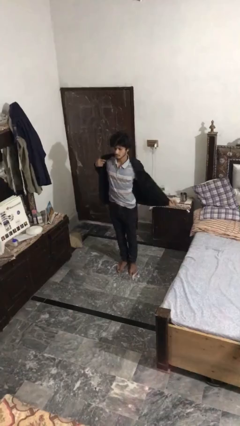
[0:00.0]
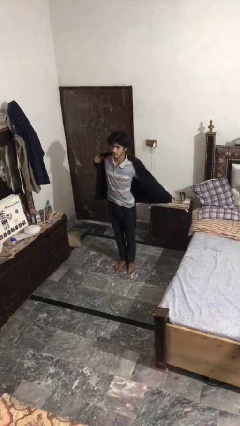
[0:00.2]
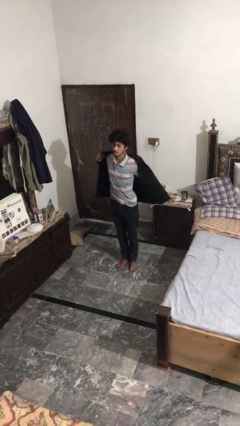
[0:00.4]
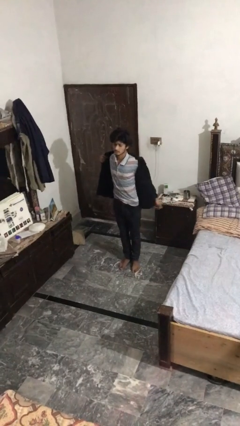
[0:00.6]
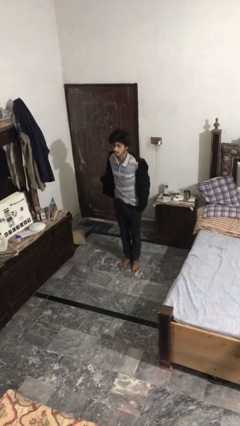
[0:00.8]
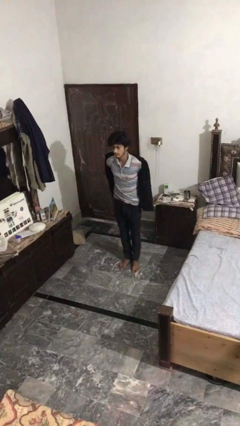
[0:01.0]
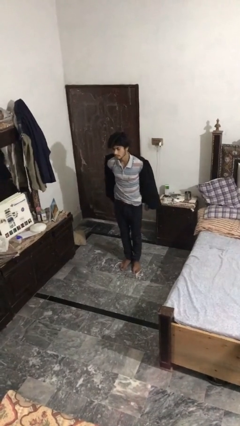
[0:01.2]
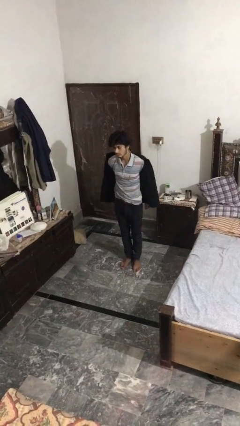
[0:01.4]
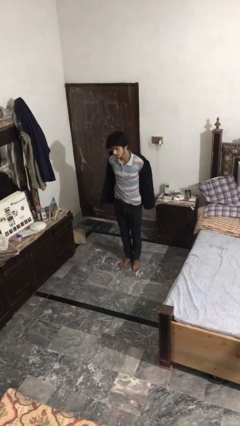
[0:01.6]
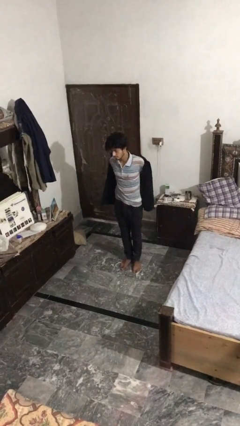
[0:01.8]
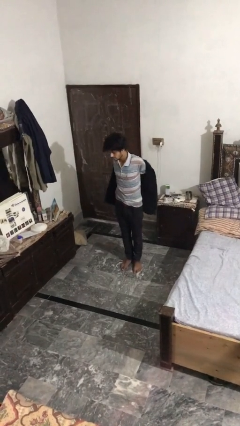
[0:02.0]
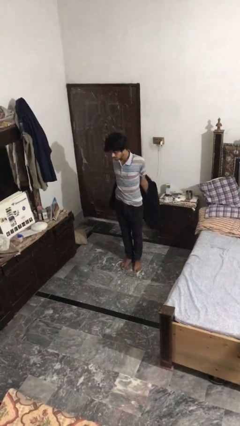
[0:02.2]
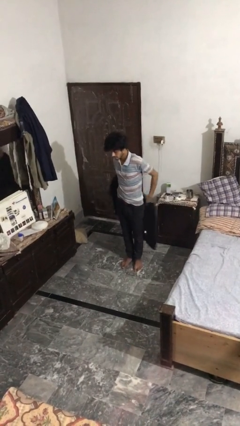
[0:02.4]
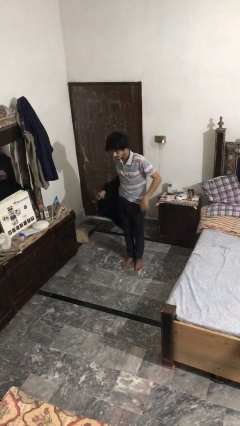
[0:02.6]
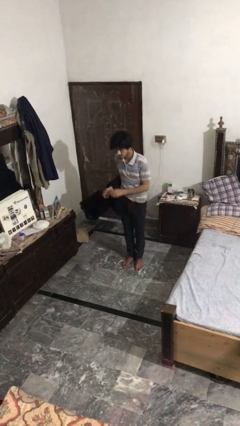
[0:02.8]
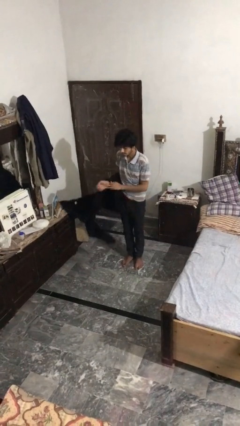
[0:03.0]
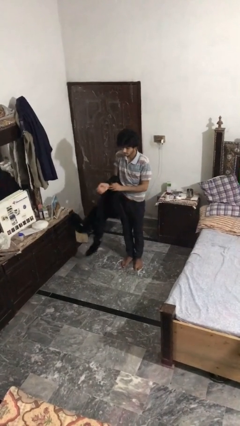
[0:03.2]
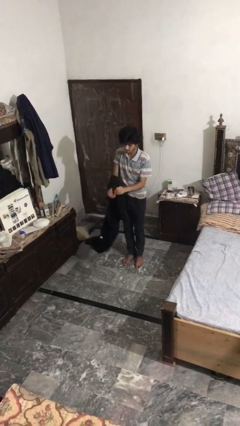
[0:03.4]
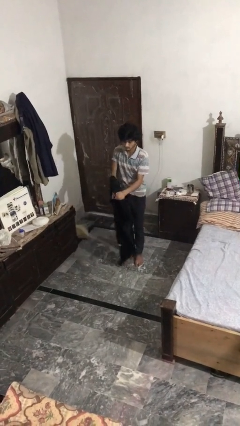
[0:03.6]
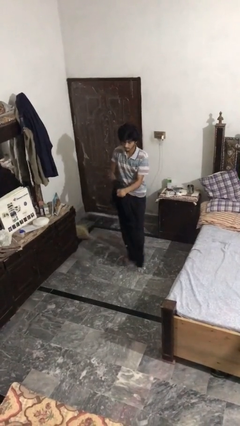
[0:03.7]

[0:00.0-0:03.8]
person takes off jacket

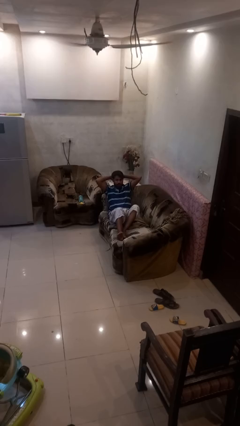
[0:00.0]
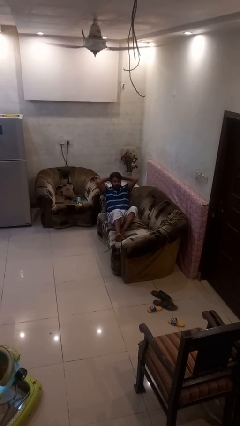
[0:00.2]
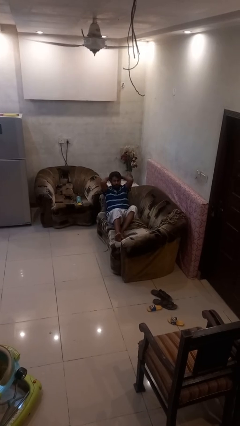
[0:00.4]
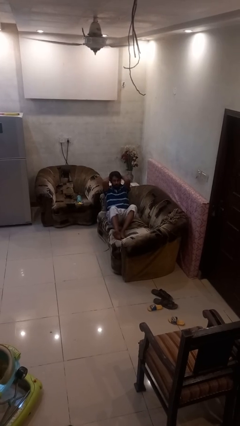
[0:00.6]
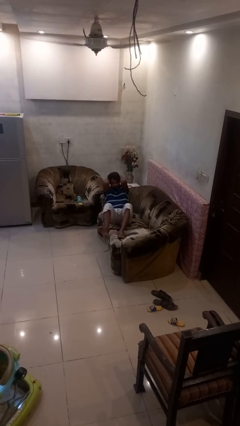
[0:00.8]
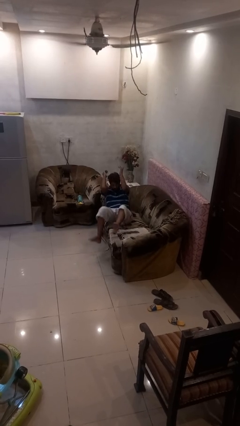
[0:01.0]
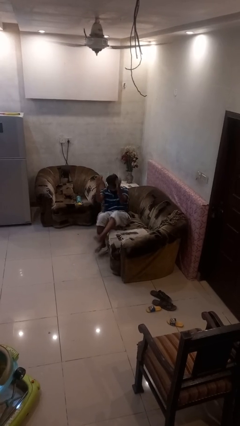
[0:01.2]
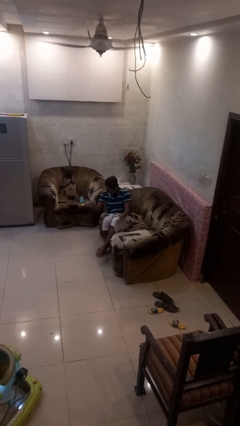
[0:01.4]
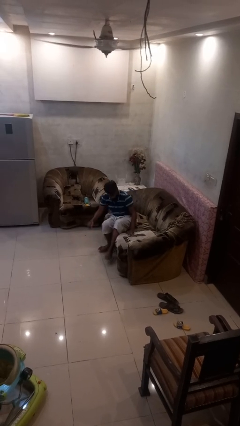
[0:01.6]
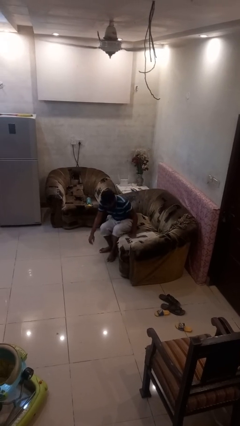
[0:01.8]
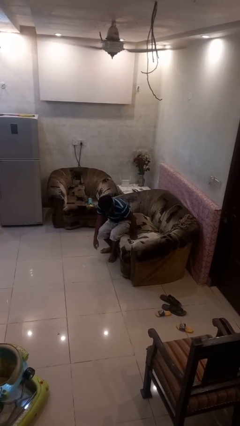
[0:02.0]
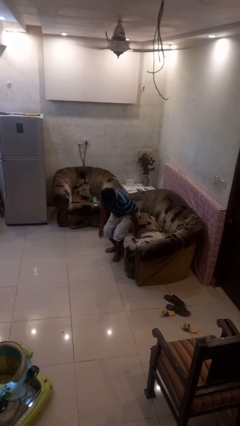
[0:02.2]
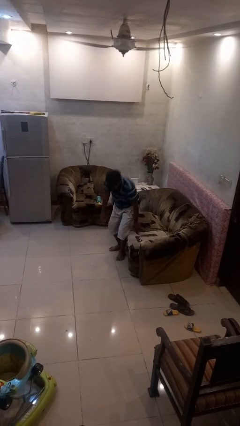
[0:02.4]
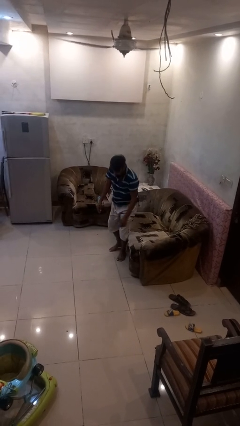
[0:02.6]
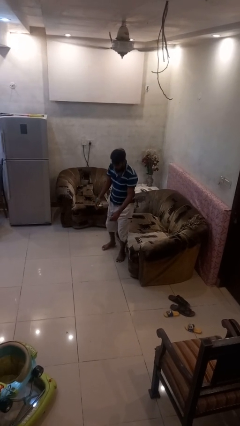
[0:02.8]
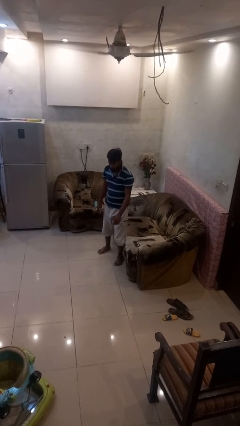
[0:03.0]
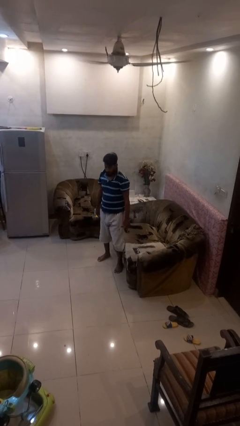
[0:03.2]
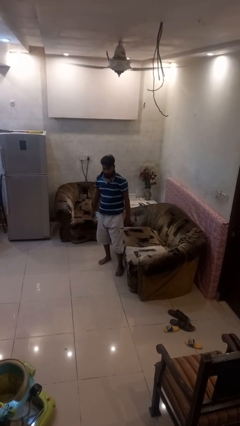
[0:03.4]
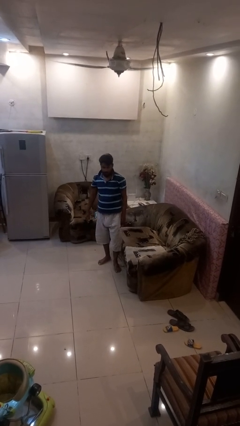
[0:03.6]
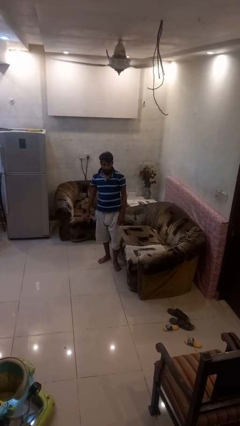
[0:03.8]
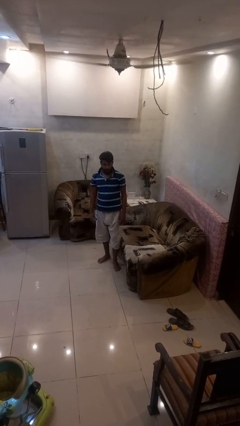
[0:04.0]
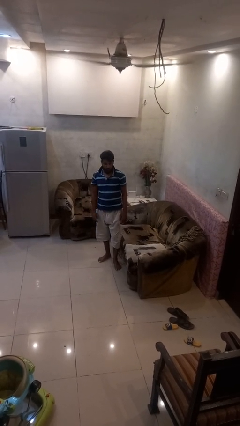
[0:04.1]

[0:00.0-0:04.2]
person stands up

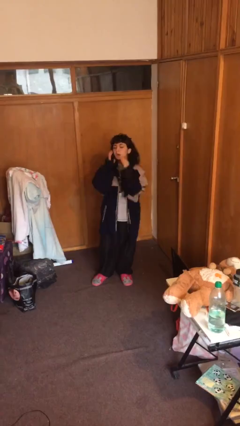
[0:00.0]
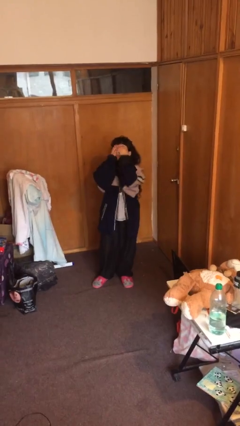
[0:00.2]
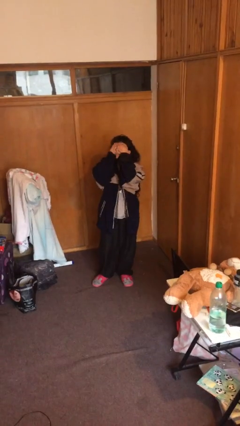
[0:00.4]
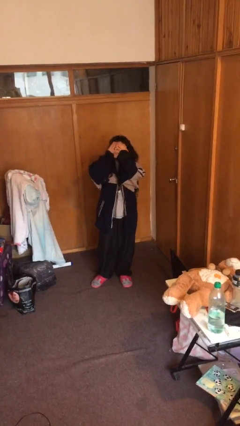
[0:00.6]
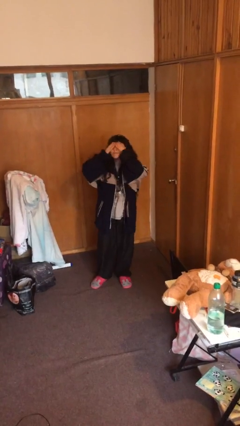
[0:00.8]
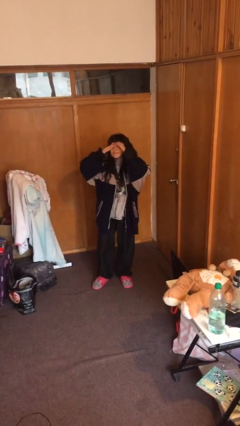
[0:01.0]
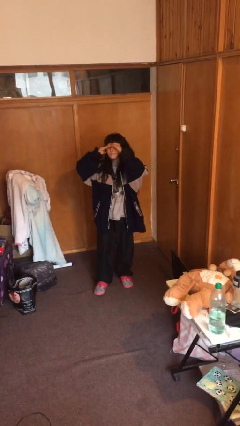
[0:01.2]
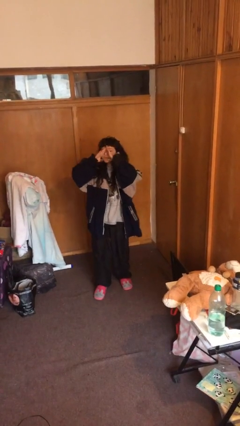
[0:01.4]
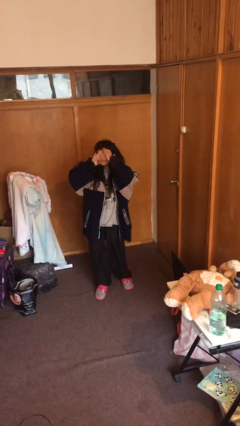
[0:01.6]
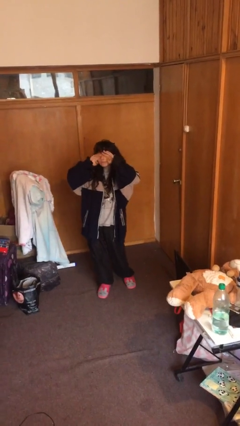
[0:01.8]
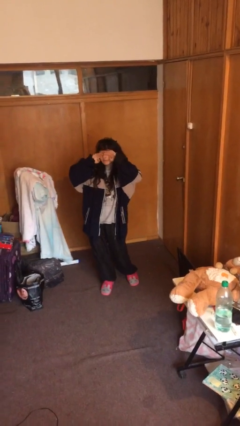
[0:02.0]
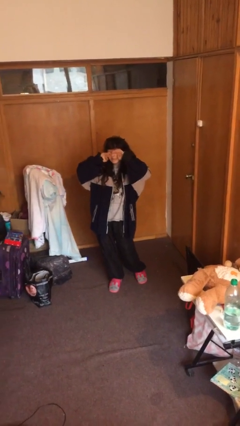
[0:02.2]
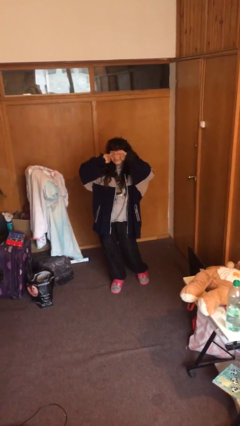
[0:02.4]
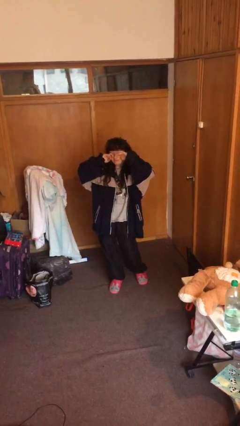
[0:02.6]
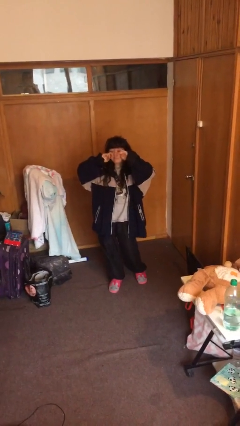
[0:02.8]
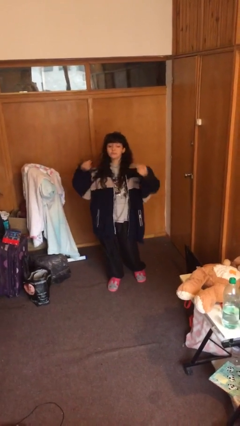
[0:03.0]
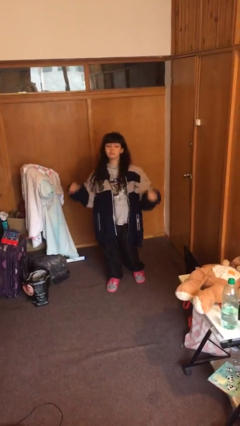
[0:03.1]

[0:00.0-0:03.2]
person rubs eyes

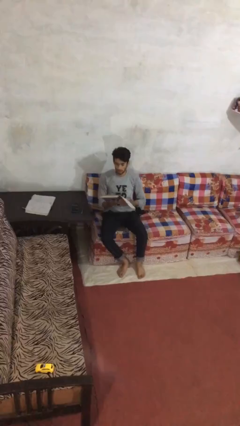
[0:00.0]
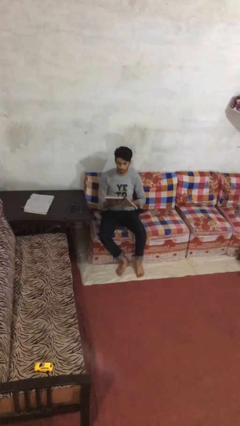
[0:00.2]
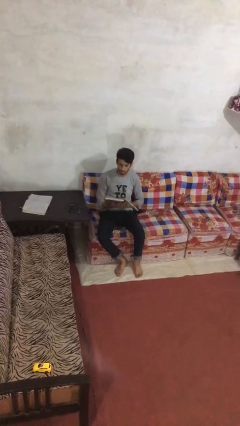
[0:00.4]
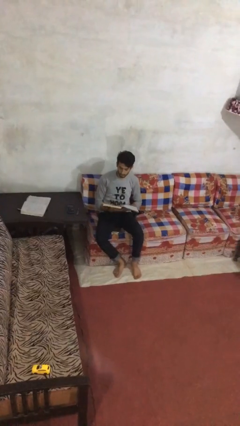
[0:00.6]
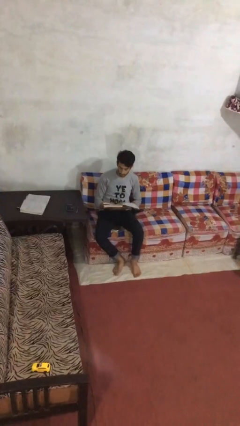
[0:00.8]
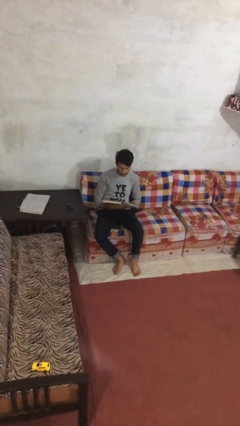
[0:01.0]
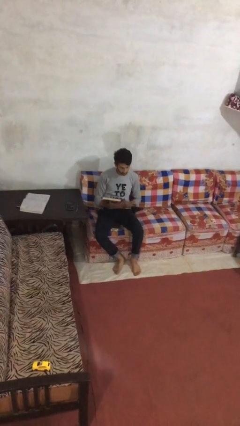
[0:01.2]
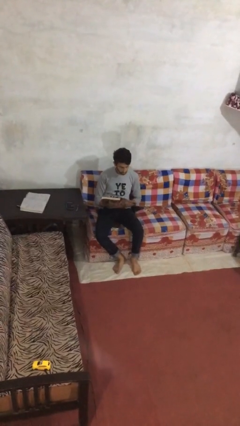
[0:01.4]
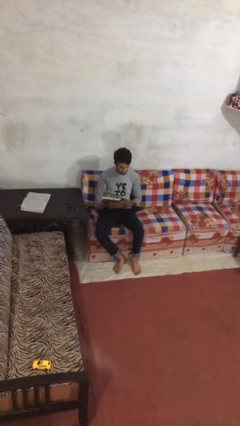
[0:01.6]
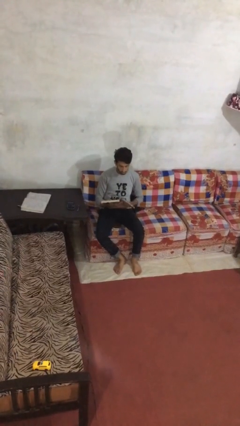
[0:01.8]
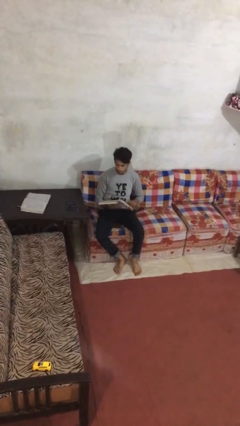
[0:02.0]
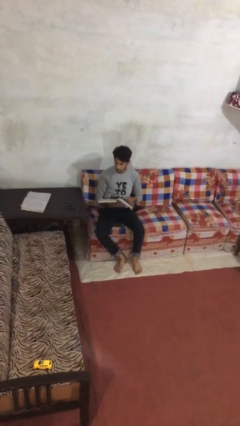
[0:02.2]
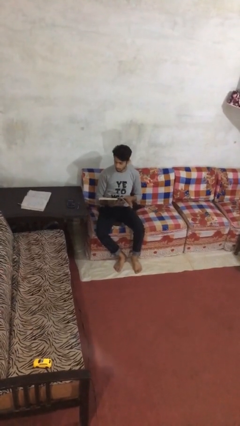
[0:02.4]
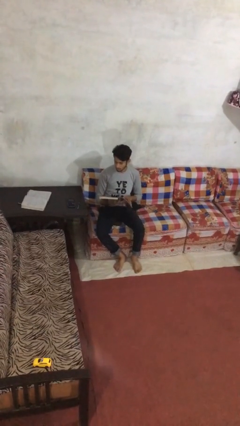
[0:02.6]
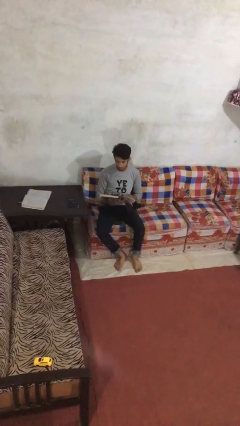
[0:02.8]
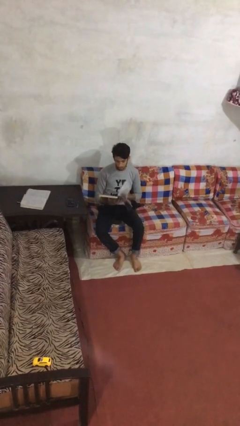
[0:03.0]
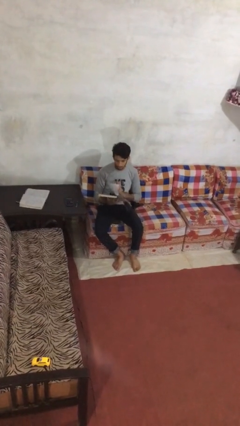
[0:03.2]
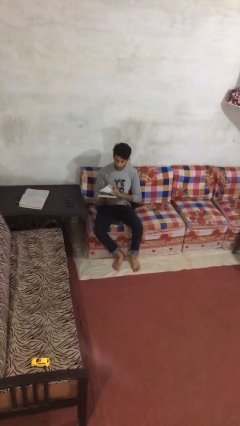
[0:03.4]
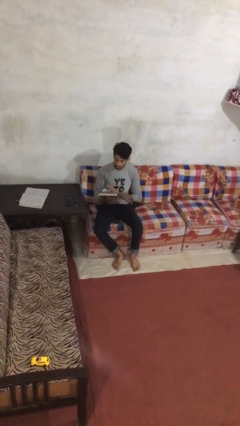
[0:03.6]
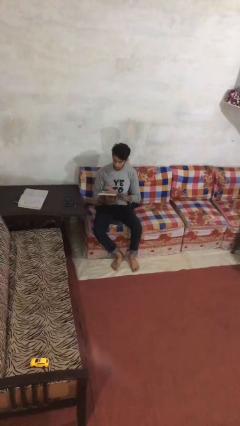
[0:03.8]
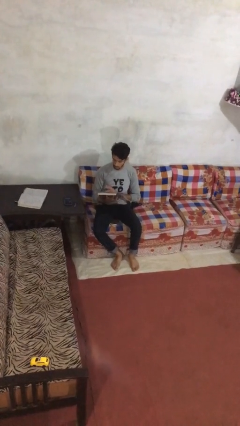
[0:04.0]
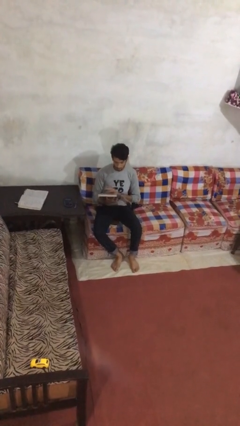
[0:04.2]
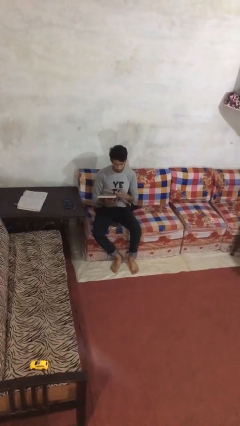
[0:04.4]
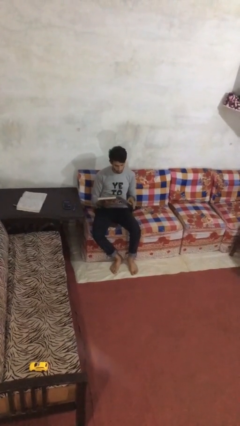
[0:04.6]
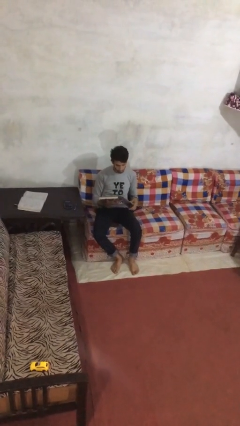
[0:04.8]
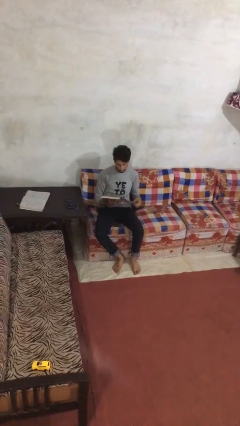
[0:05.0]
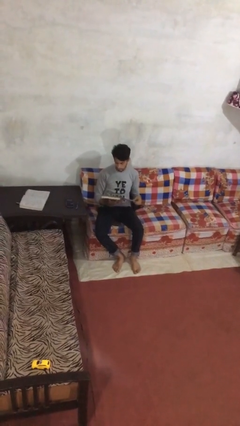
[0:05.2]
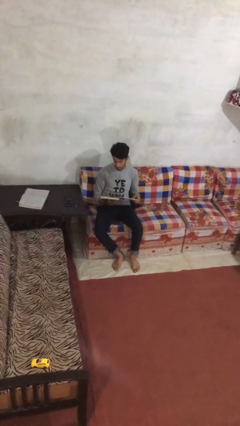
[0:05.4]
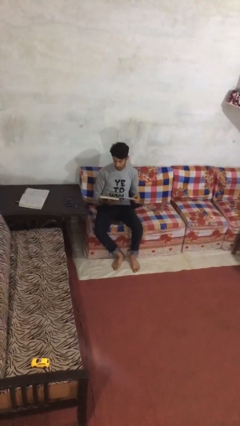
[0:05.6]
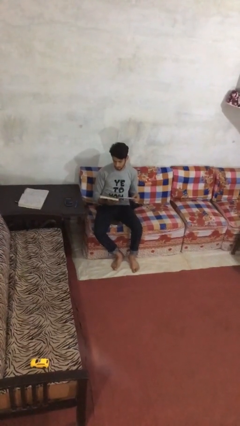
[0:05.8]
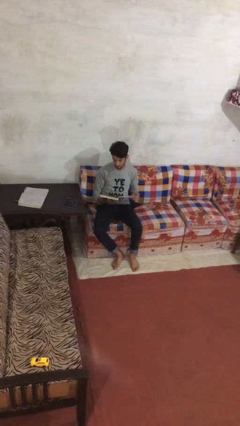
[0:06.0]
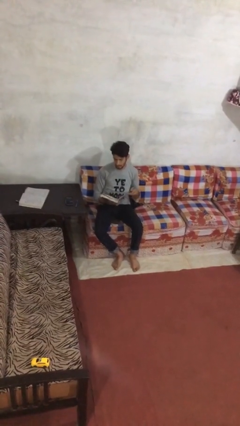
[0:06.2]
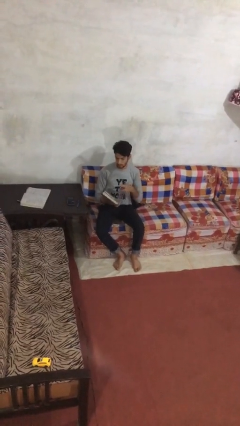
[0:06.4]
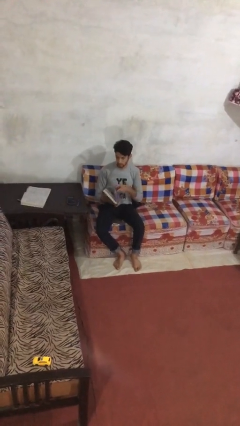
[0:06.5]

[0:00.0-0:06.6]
person reads document
